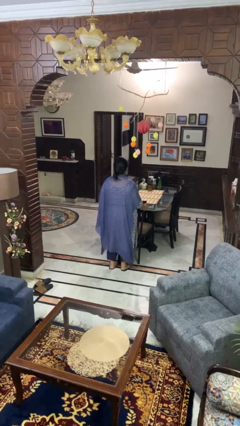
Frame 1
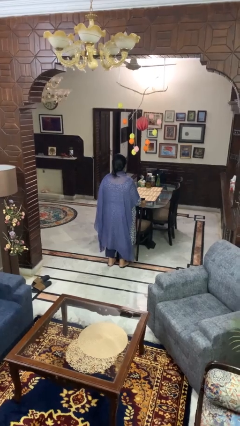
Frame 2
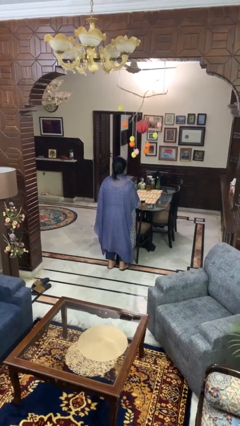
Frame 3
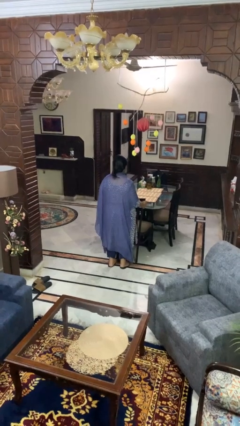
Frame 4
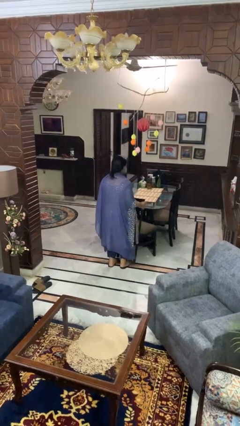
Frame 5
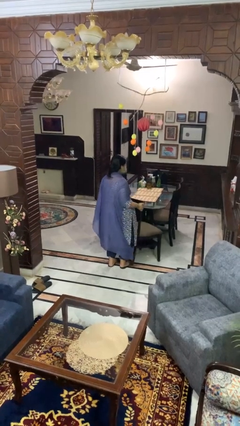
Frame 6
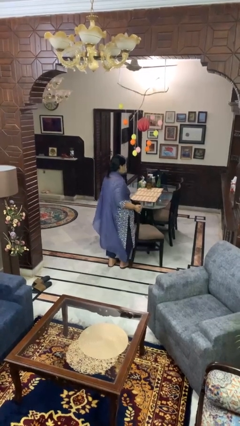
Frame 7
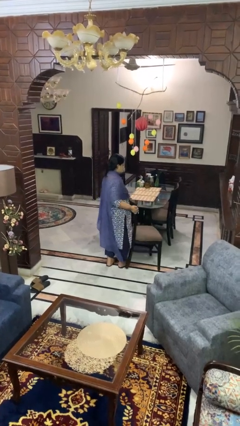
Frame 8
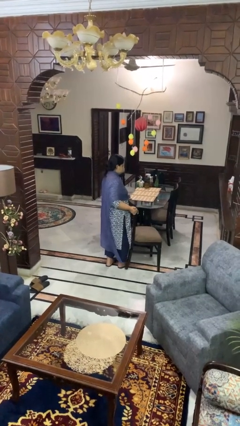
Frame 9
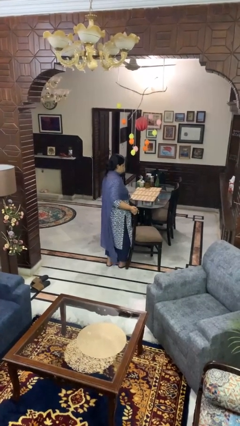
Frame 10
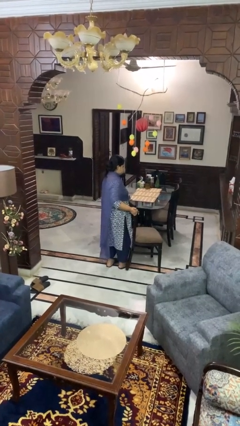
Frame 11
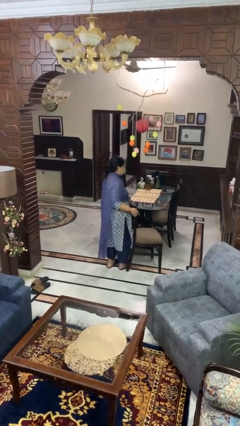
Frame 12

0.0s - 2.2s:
person pulls out chair

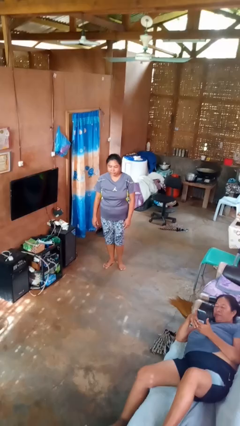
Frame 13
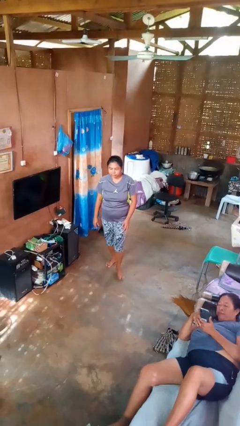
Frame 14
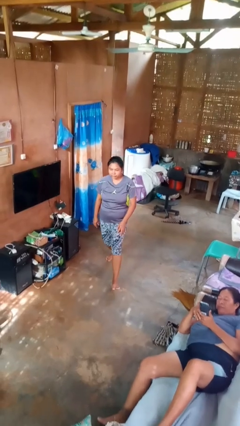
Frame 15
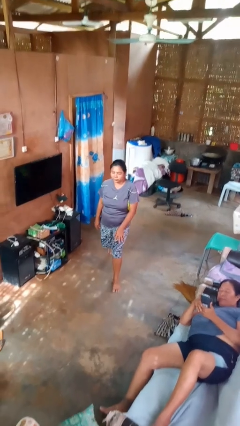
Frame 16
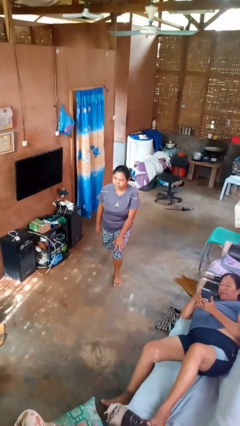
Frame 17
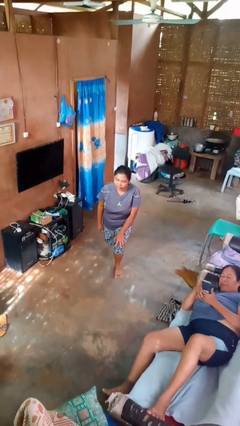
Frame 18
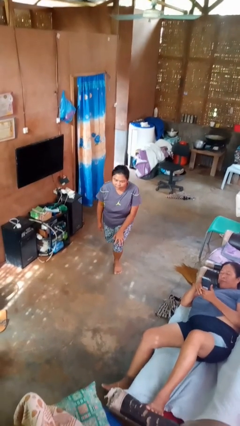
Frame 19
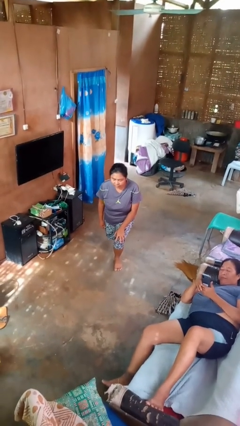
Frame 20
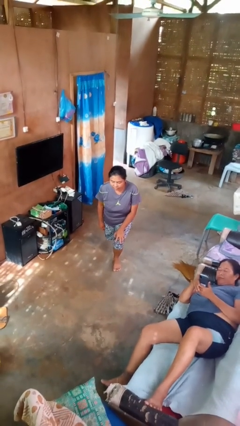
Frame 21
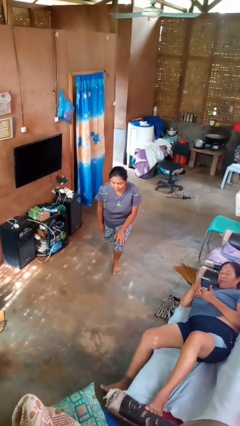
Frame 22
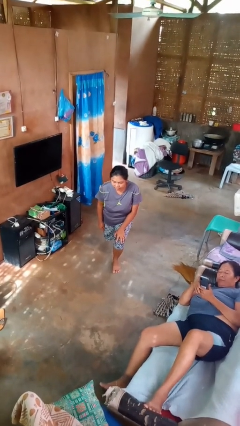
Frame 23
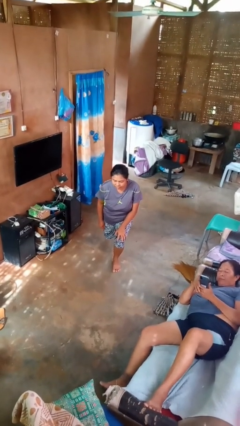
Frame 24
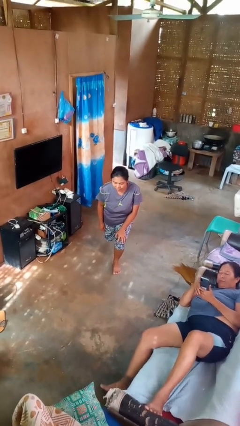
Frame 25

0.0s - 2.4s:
person exercises with lunges

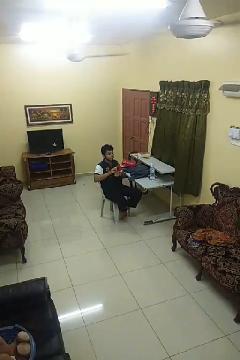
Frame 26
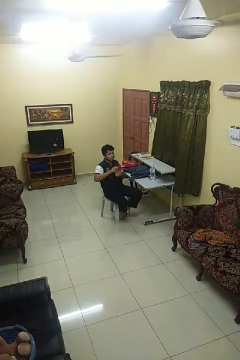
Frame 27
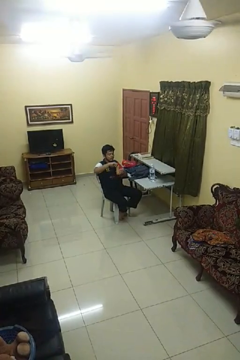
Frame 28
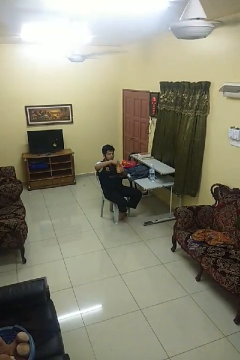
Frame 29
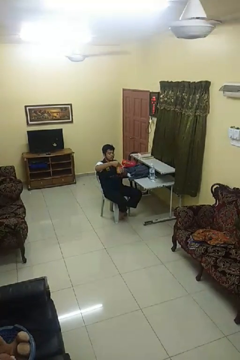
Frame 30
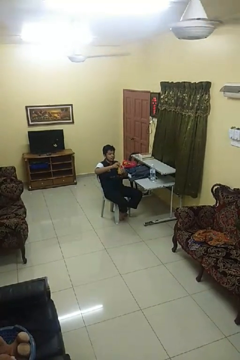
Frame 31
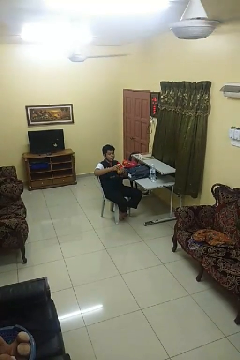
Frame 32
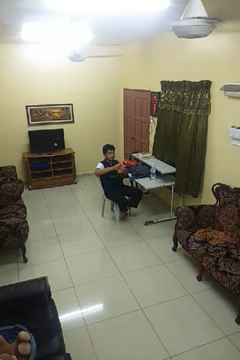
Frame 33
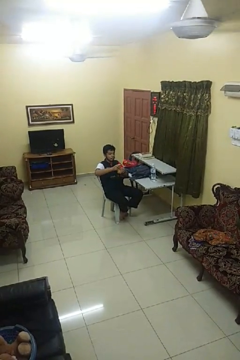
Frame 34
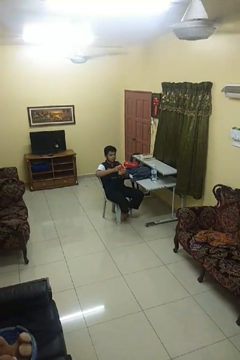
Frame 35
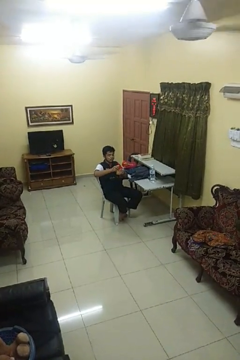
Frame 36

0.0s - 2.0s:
person opens beverage can

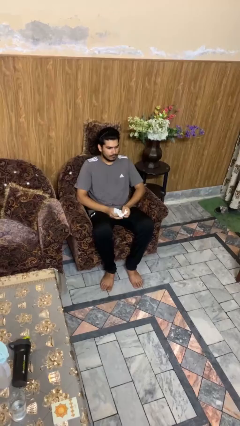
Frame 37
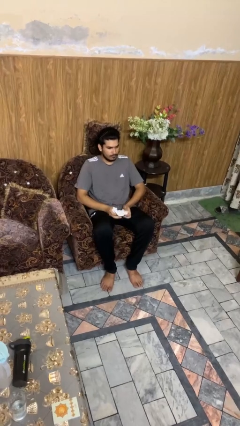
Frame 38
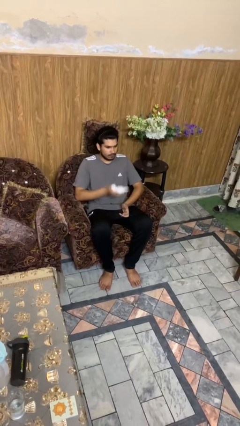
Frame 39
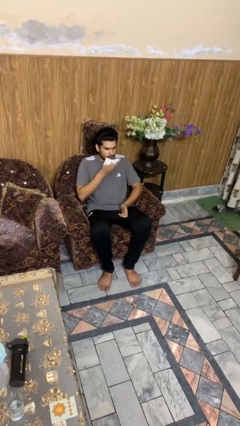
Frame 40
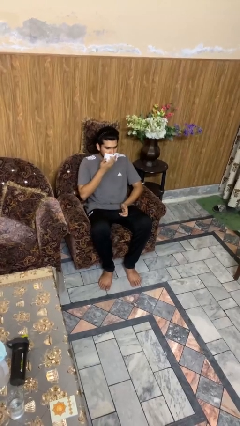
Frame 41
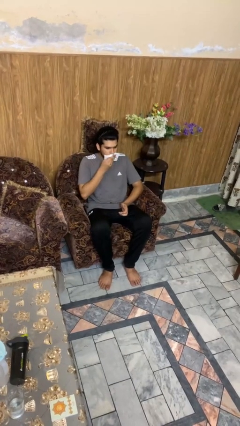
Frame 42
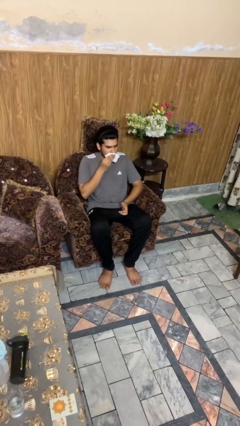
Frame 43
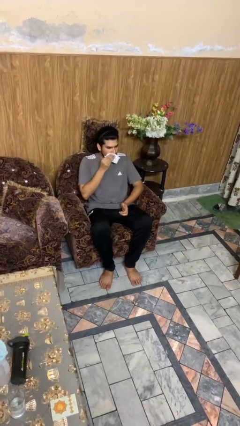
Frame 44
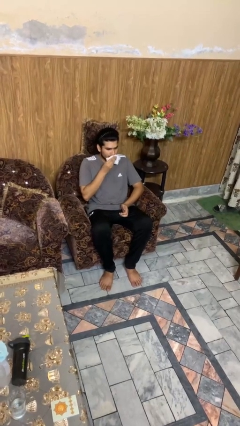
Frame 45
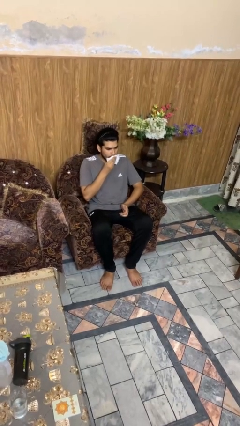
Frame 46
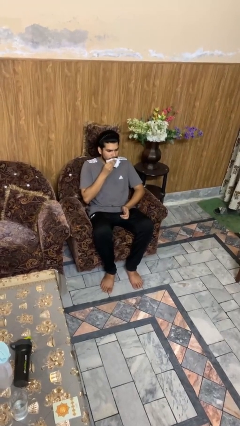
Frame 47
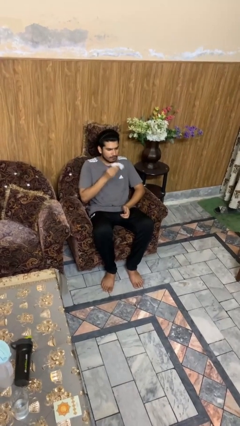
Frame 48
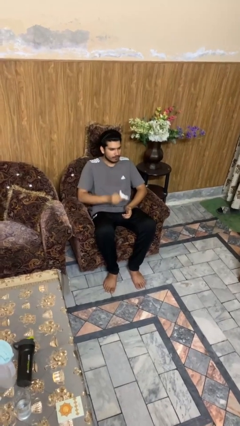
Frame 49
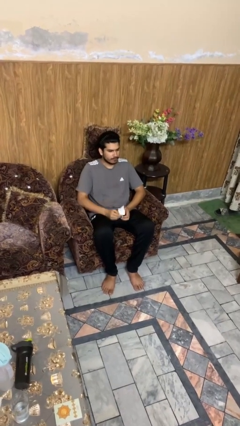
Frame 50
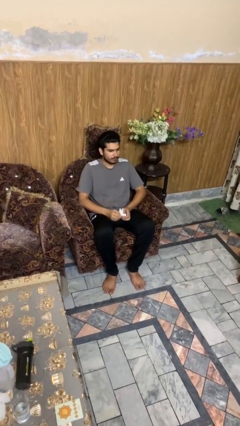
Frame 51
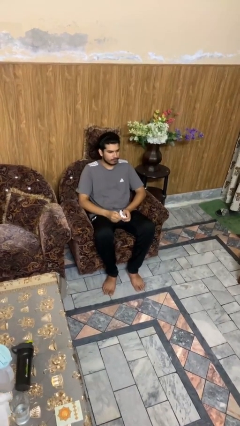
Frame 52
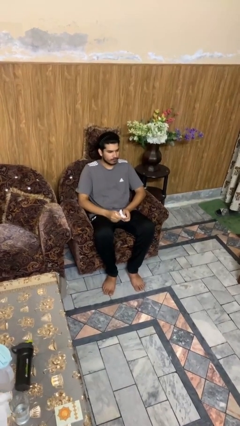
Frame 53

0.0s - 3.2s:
person wipes mouth with napkin

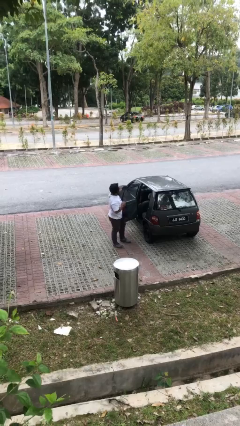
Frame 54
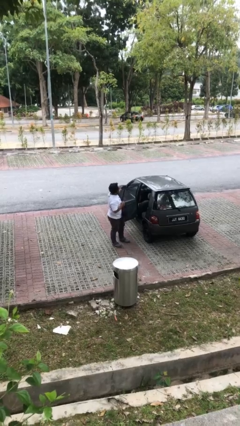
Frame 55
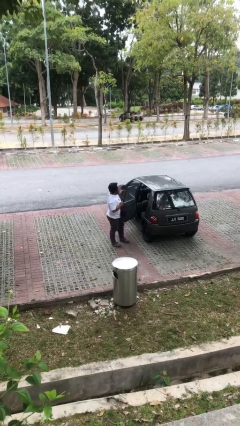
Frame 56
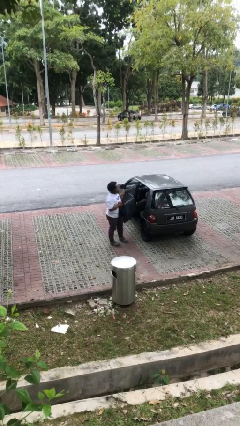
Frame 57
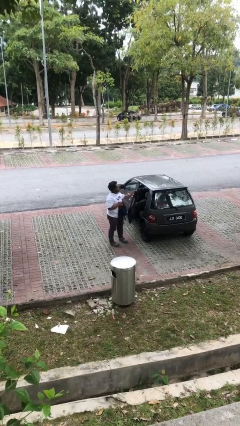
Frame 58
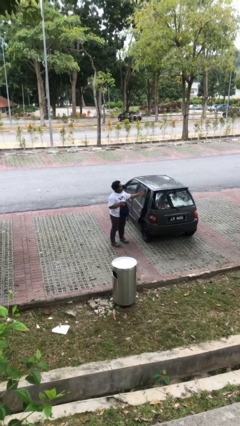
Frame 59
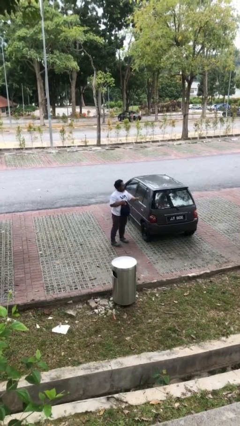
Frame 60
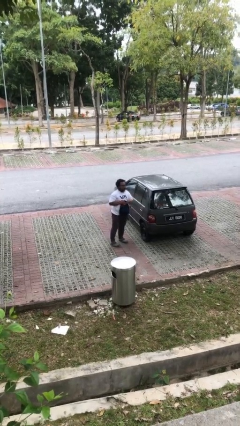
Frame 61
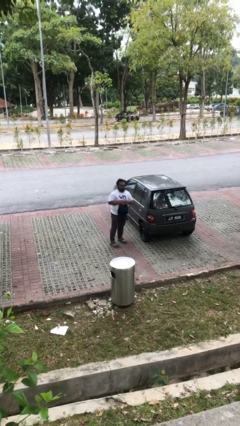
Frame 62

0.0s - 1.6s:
person closes car door

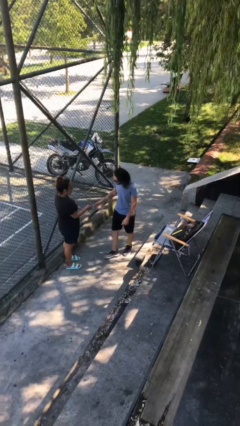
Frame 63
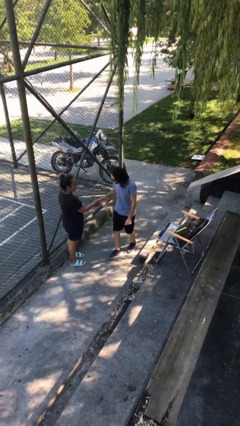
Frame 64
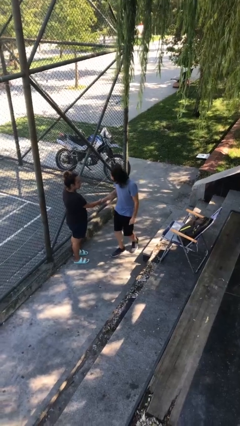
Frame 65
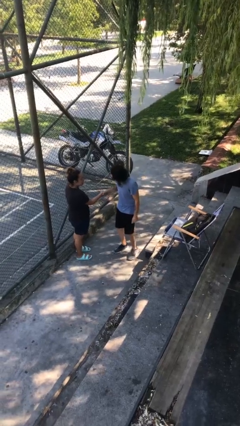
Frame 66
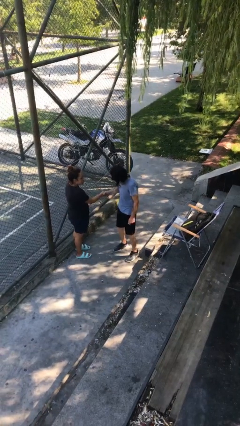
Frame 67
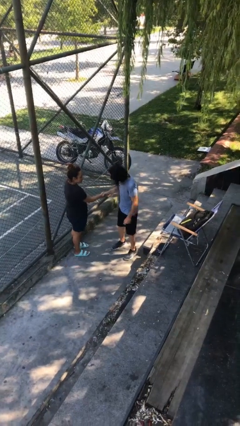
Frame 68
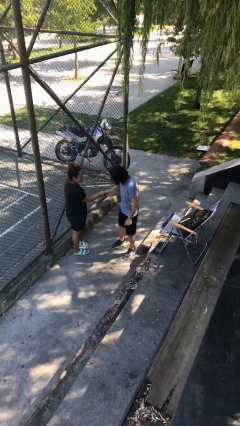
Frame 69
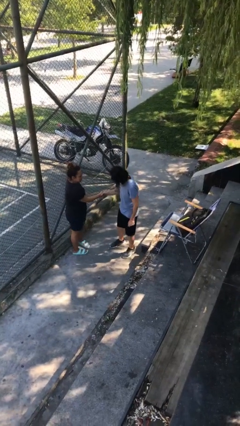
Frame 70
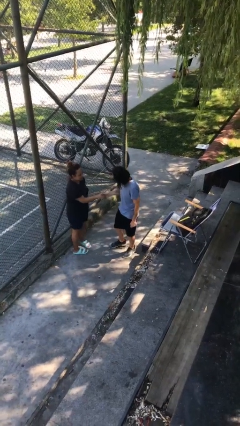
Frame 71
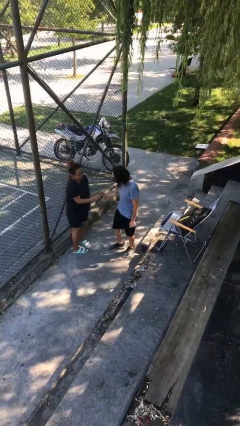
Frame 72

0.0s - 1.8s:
person shakes hand

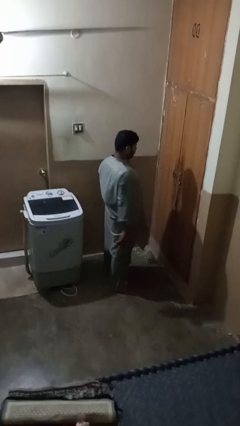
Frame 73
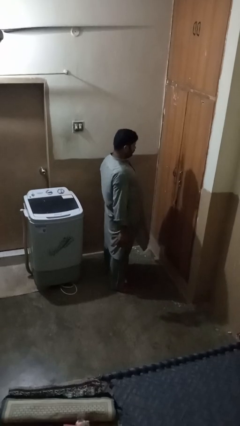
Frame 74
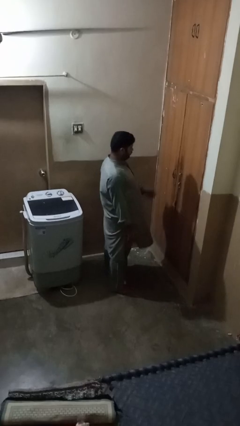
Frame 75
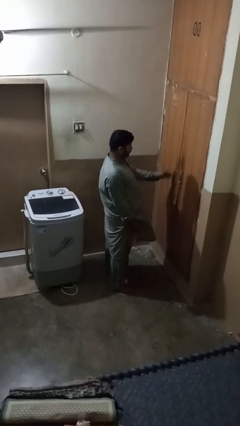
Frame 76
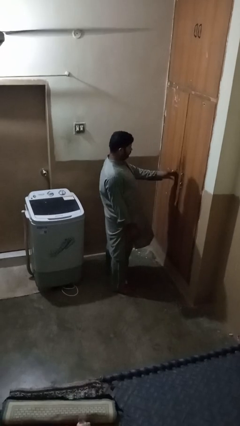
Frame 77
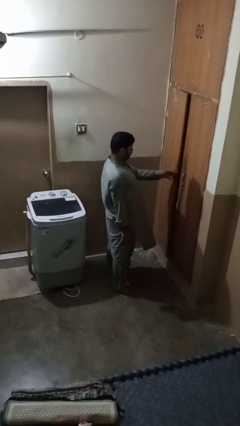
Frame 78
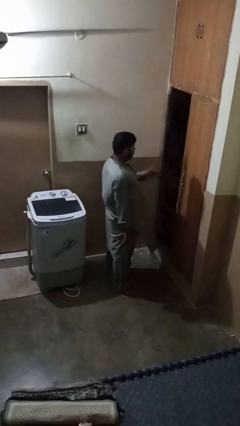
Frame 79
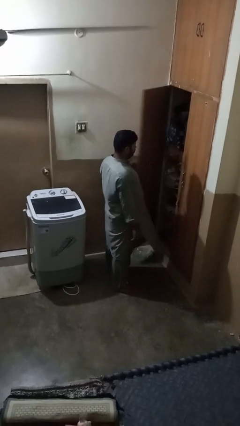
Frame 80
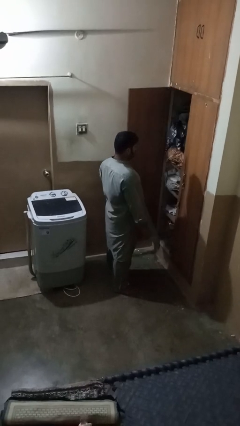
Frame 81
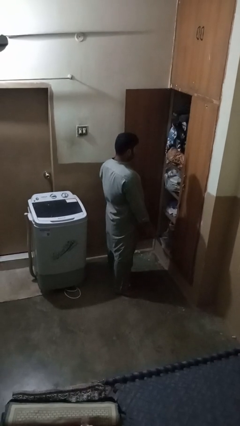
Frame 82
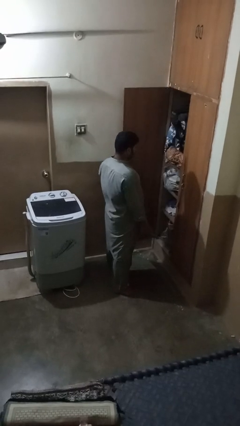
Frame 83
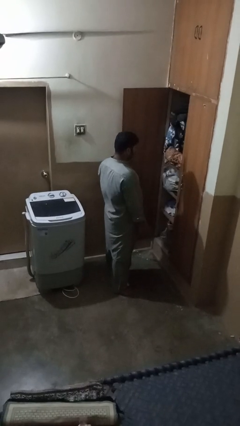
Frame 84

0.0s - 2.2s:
person opens closet door

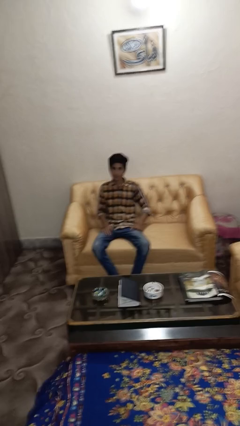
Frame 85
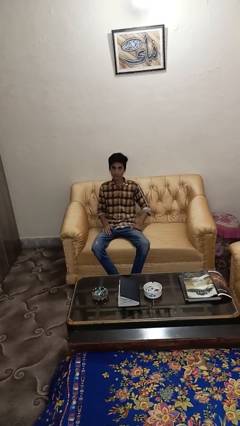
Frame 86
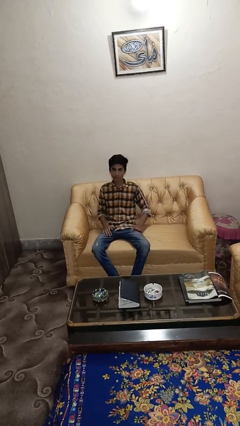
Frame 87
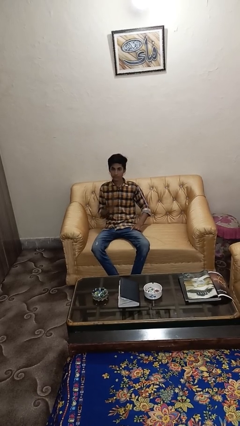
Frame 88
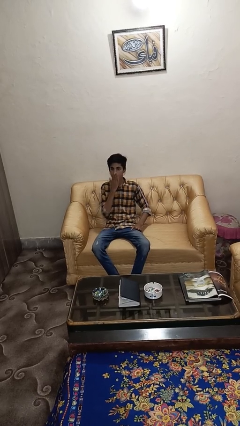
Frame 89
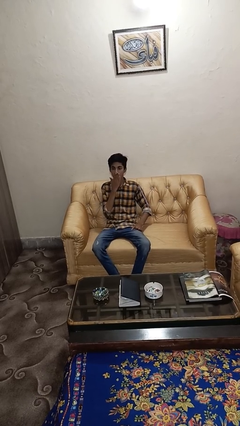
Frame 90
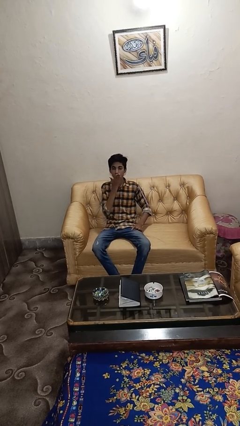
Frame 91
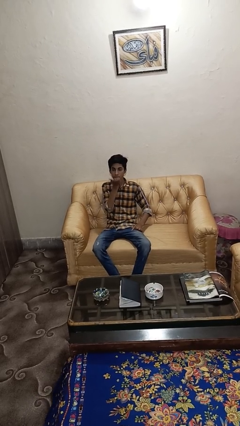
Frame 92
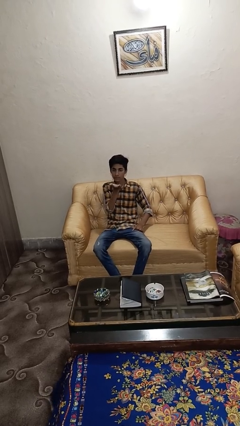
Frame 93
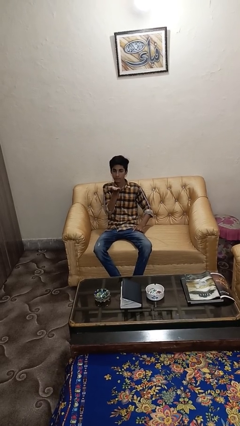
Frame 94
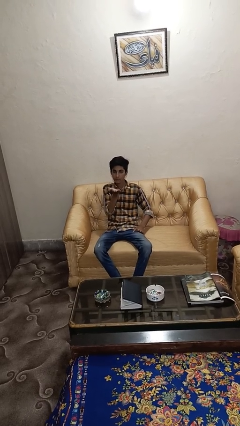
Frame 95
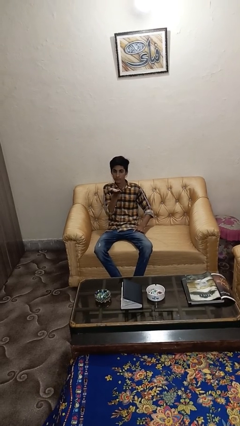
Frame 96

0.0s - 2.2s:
person gestures blow kiss
